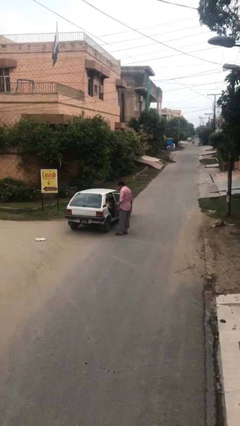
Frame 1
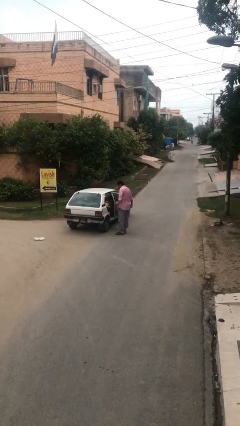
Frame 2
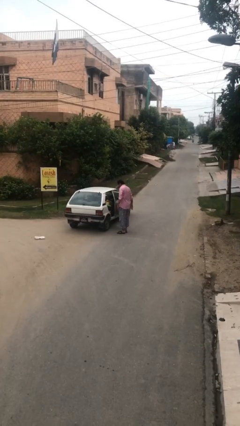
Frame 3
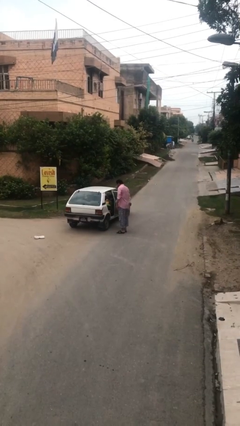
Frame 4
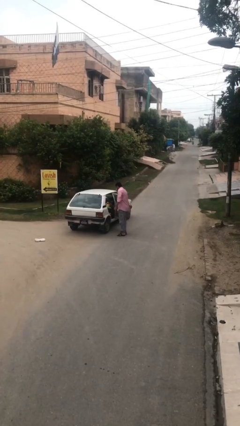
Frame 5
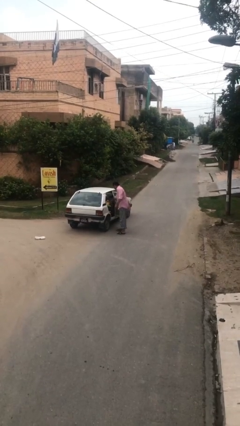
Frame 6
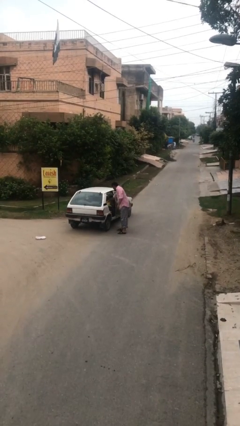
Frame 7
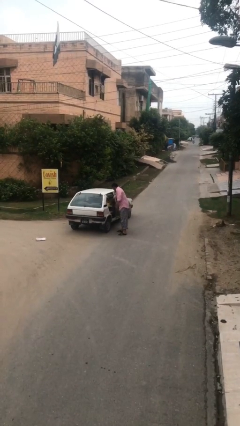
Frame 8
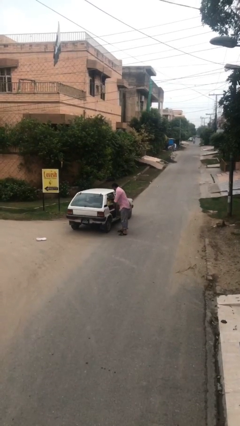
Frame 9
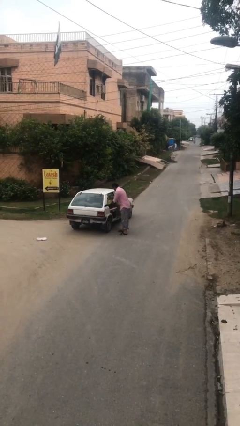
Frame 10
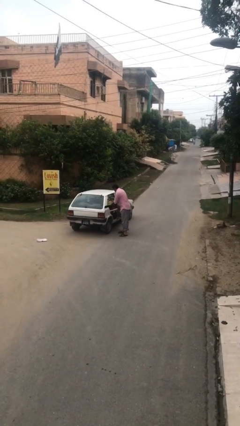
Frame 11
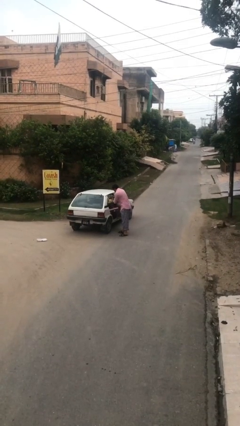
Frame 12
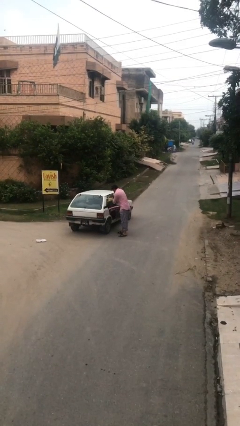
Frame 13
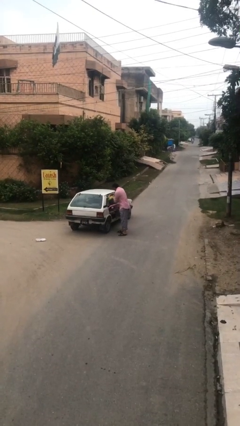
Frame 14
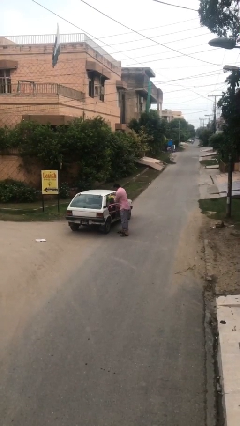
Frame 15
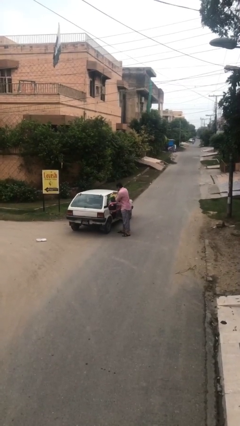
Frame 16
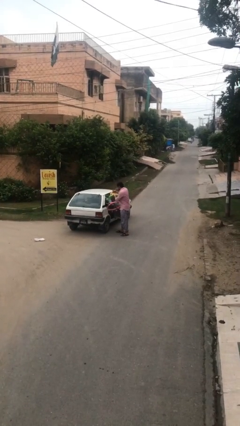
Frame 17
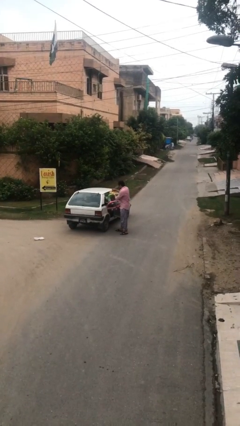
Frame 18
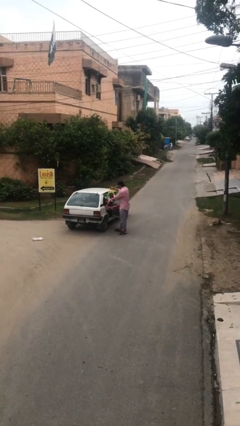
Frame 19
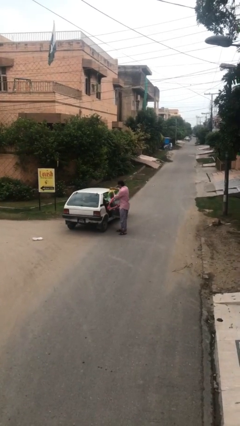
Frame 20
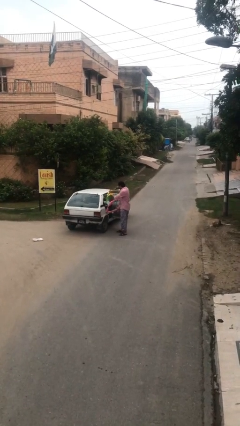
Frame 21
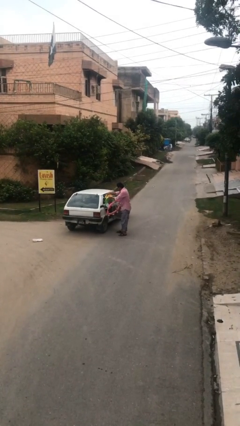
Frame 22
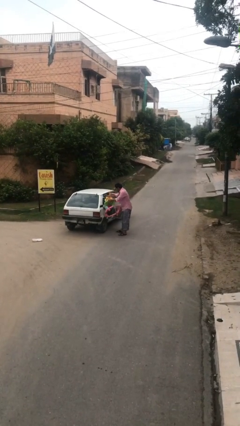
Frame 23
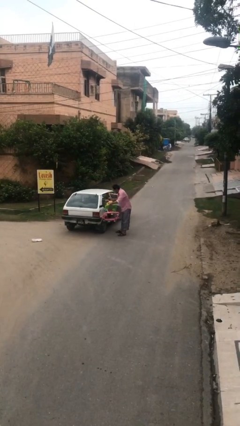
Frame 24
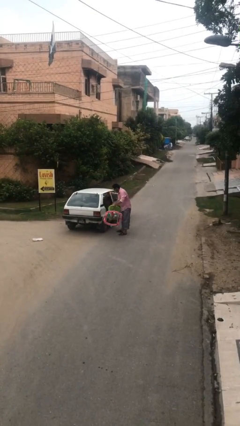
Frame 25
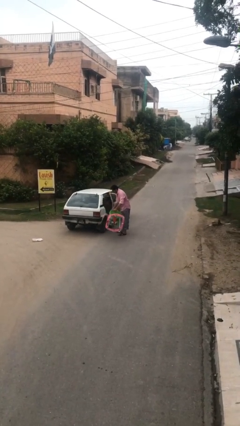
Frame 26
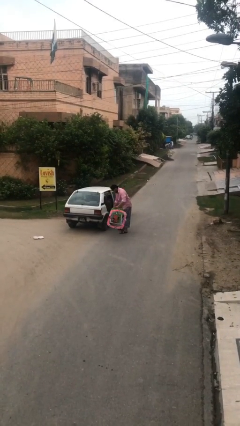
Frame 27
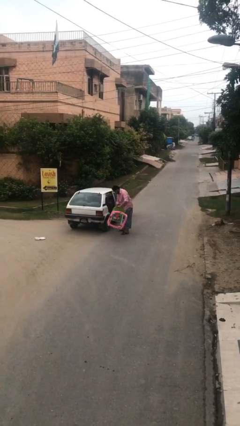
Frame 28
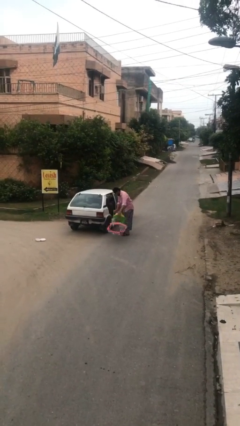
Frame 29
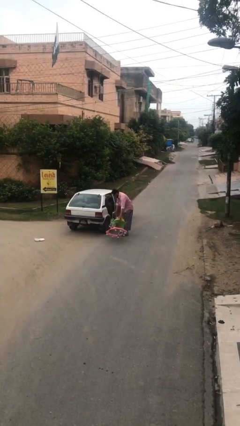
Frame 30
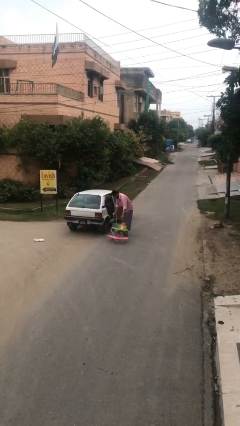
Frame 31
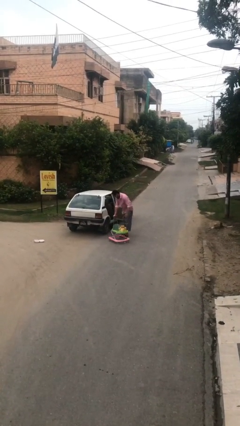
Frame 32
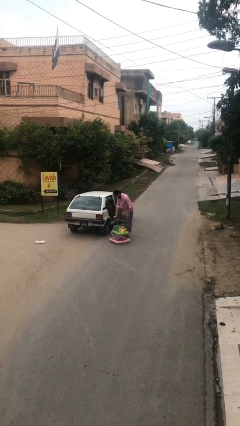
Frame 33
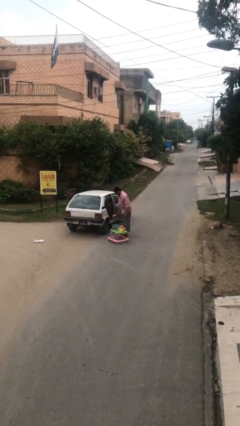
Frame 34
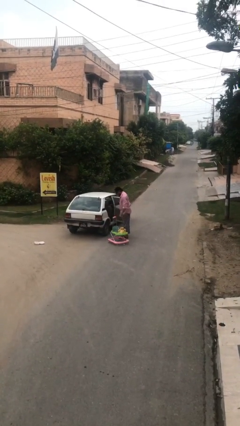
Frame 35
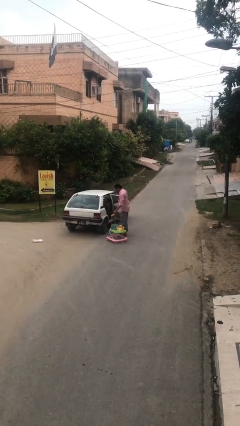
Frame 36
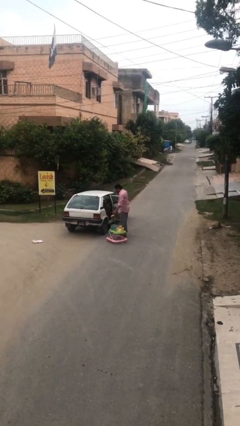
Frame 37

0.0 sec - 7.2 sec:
person unloads car

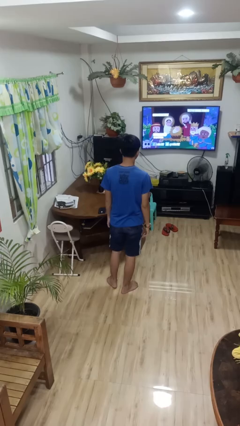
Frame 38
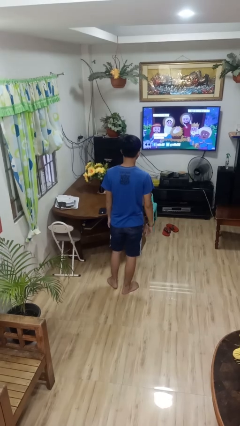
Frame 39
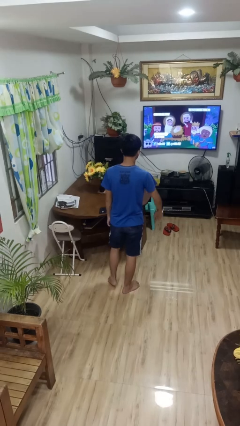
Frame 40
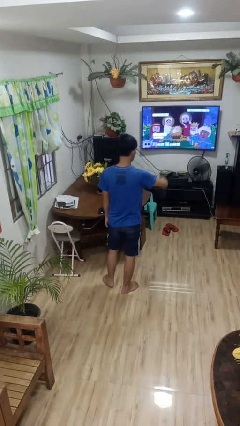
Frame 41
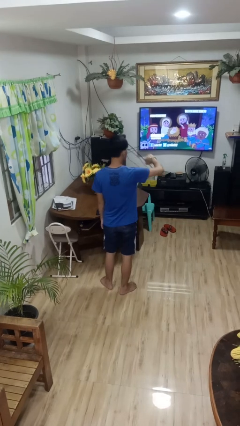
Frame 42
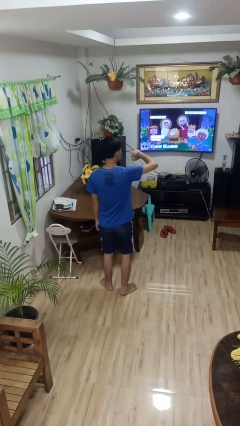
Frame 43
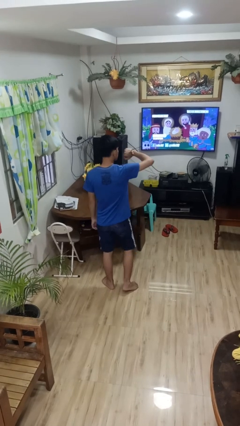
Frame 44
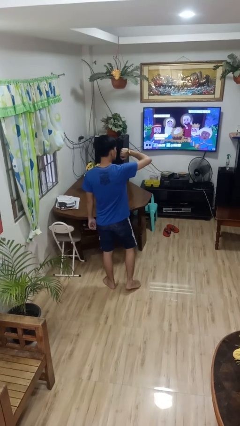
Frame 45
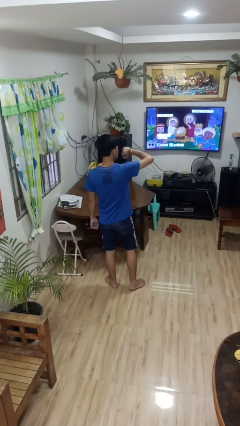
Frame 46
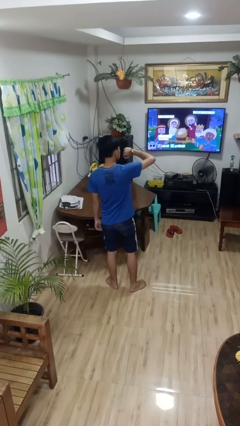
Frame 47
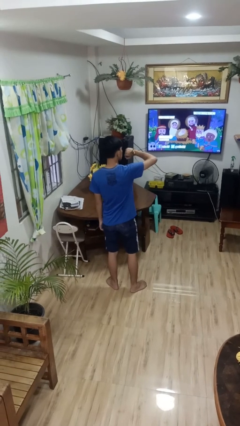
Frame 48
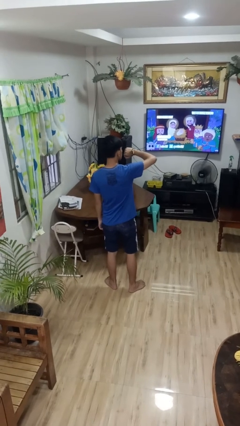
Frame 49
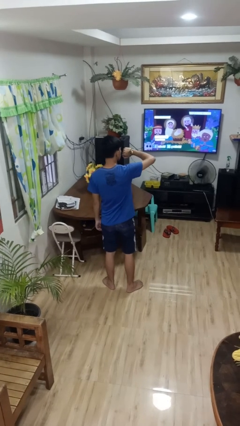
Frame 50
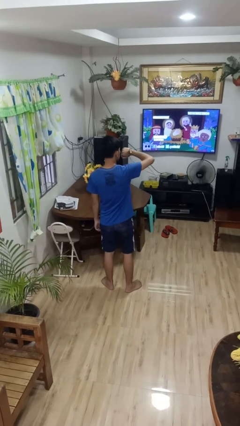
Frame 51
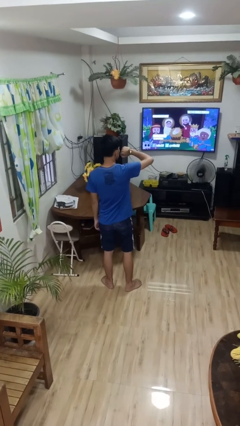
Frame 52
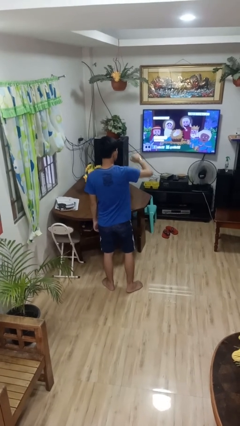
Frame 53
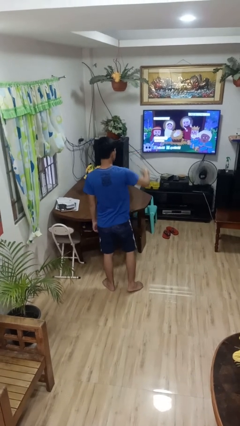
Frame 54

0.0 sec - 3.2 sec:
person looks at wristwatch

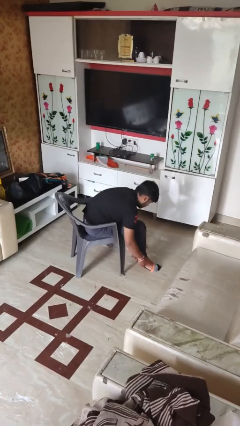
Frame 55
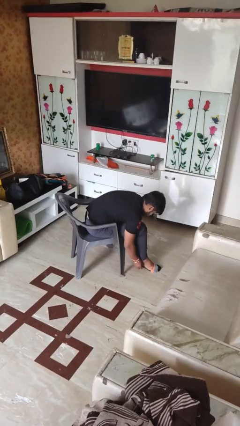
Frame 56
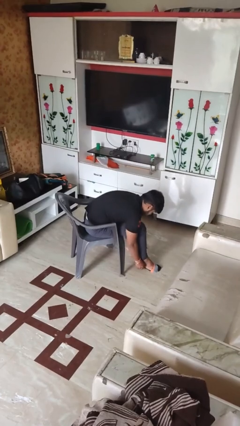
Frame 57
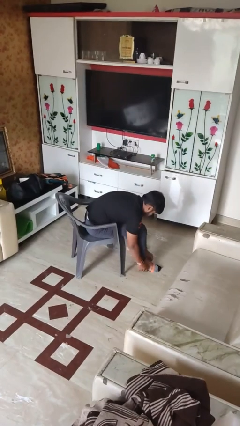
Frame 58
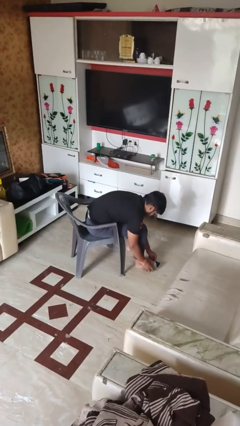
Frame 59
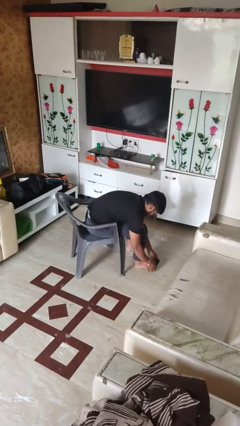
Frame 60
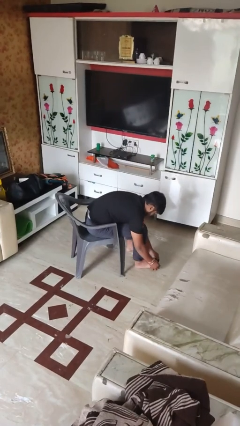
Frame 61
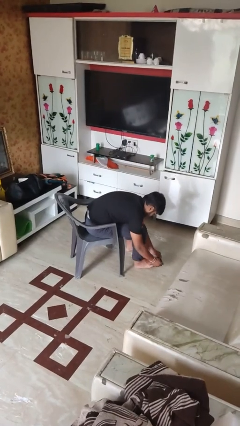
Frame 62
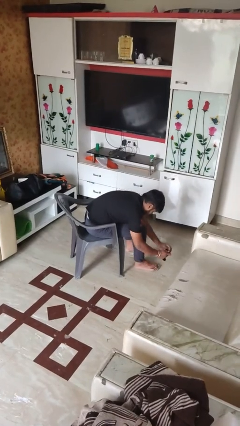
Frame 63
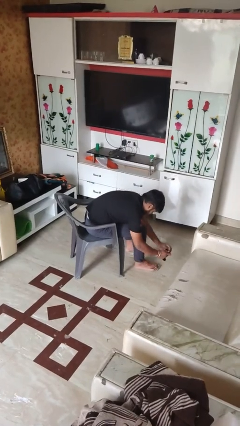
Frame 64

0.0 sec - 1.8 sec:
person takes off socks

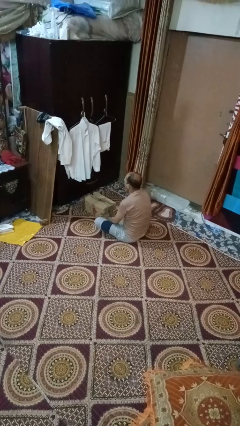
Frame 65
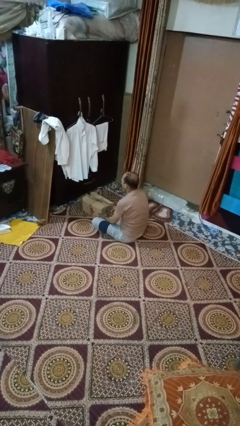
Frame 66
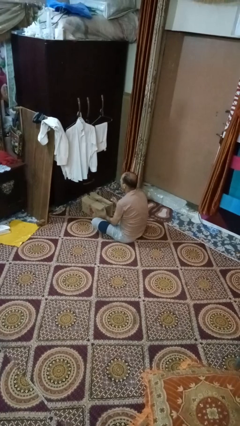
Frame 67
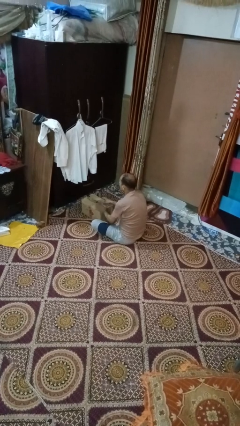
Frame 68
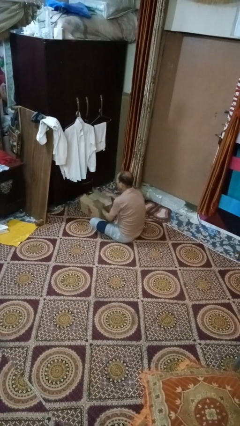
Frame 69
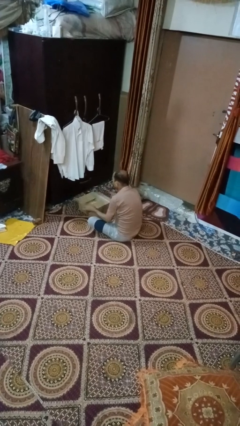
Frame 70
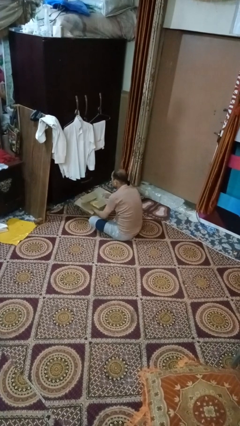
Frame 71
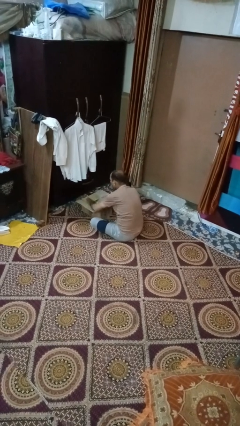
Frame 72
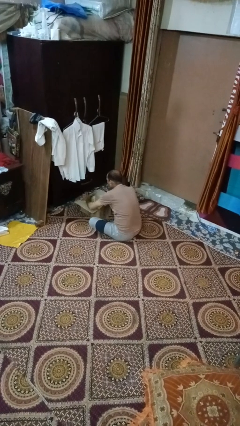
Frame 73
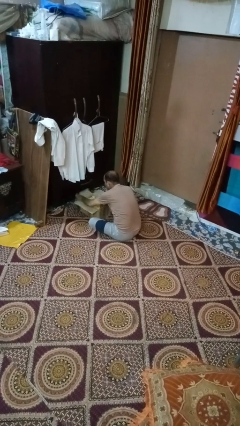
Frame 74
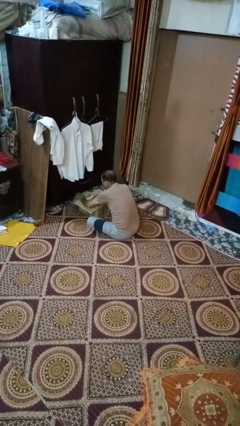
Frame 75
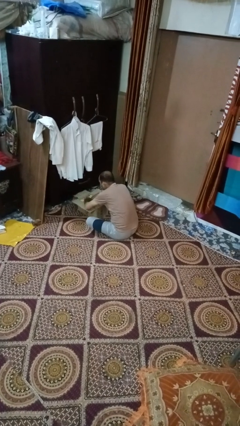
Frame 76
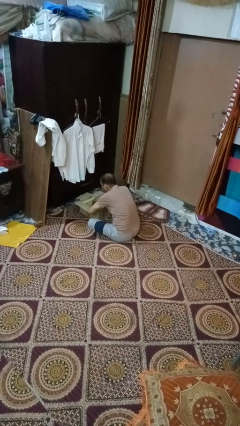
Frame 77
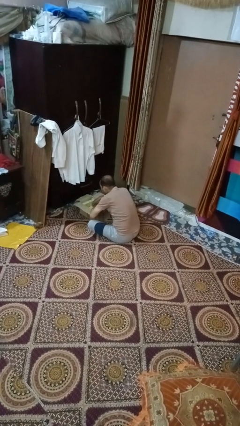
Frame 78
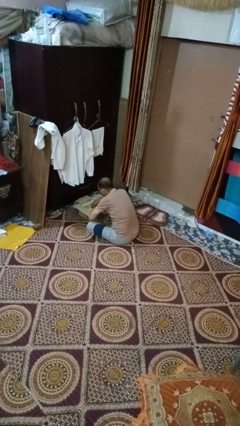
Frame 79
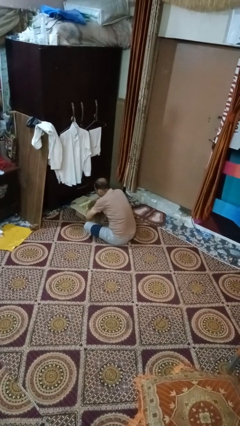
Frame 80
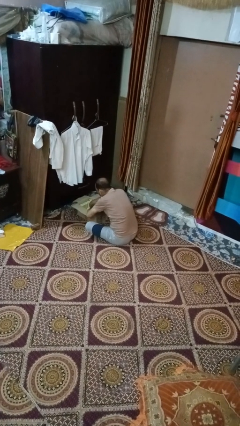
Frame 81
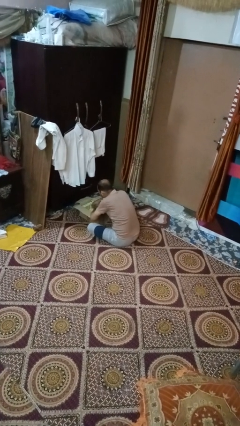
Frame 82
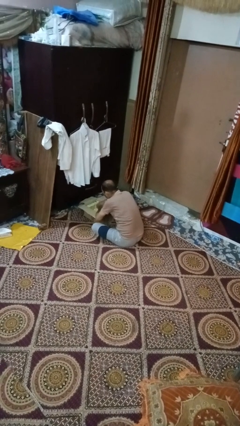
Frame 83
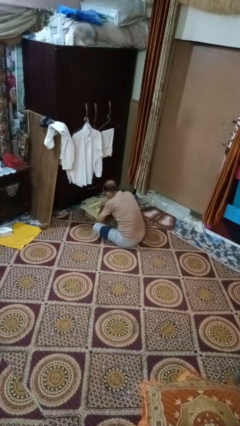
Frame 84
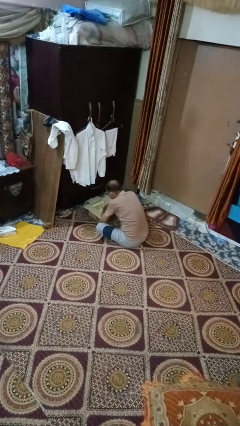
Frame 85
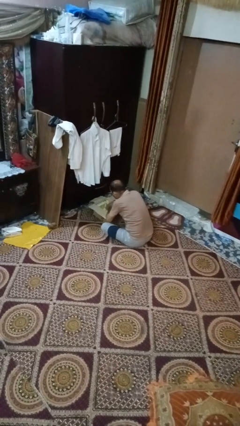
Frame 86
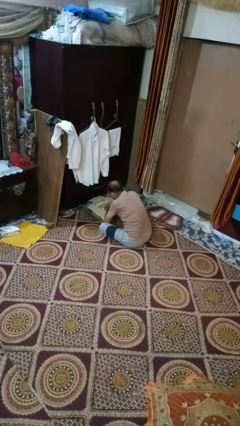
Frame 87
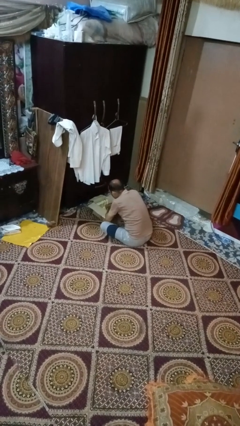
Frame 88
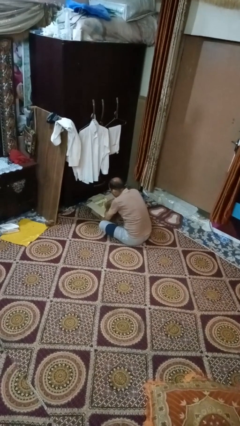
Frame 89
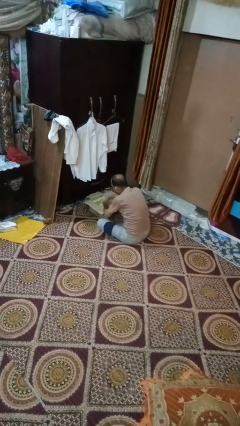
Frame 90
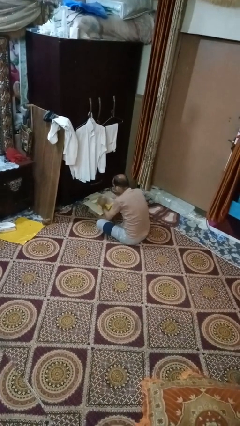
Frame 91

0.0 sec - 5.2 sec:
person searches in box

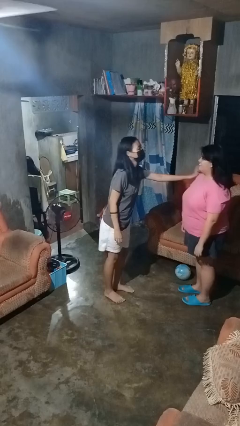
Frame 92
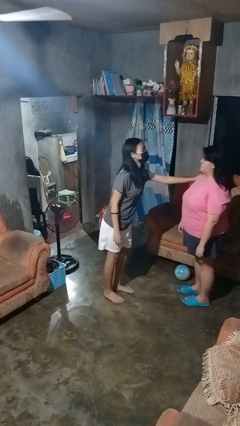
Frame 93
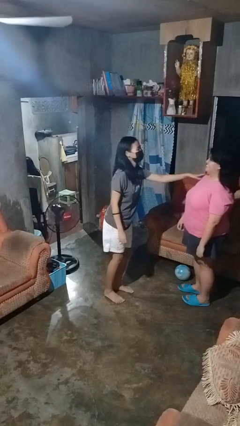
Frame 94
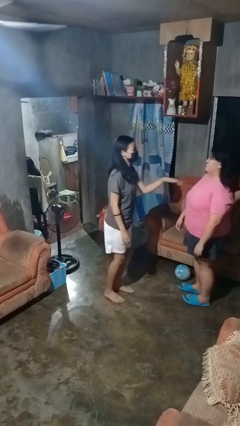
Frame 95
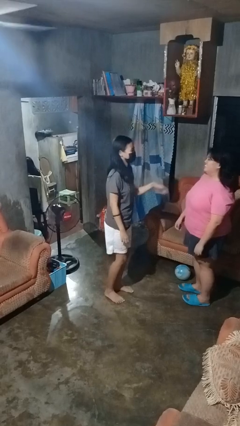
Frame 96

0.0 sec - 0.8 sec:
person shoves person
